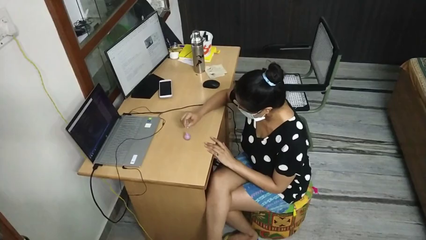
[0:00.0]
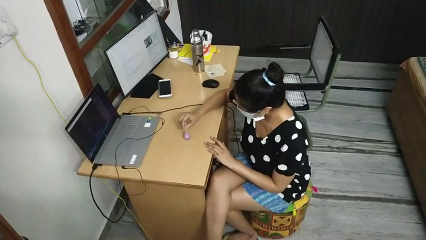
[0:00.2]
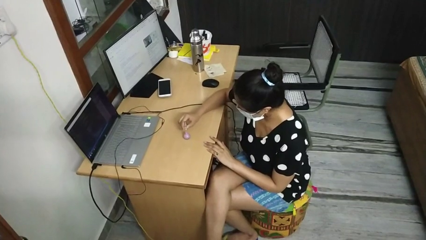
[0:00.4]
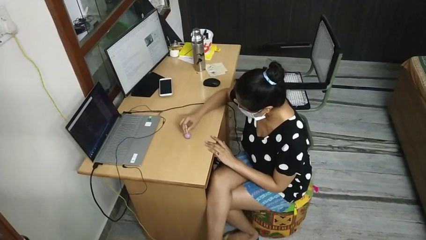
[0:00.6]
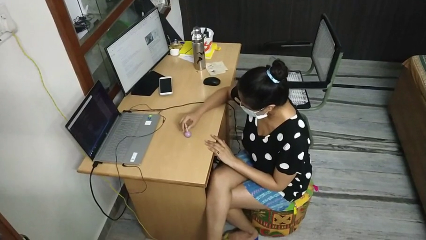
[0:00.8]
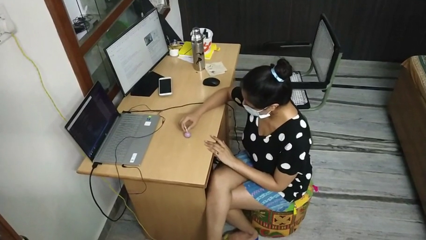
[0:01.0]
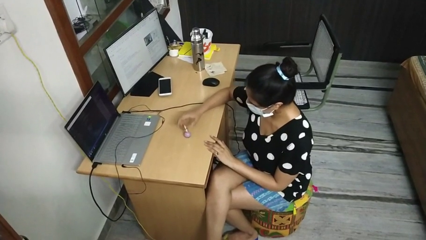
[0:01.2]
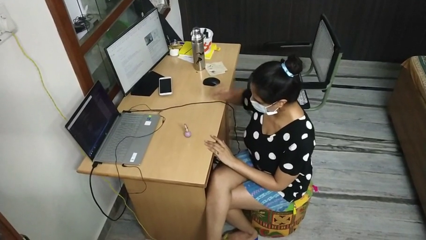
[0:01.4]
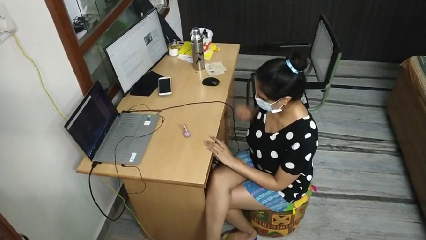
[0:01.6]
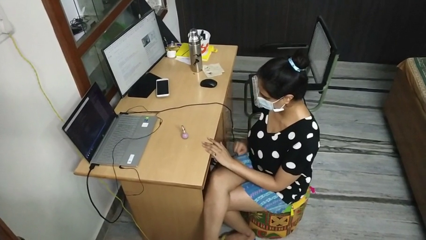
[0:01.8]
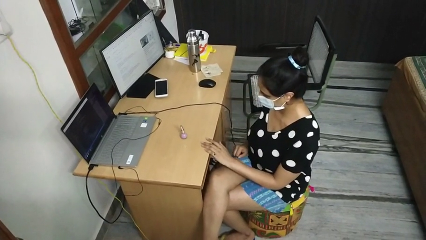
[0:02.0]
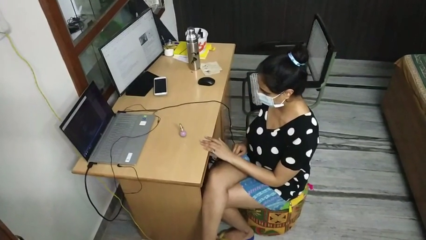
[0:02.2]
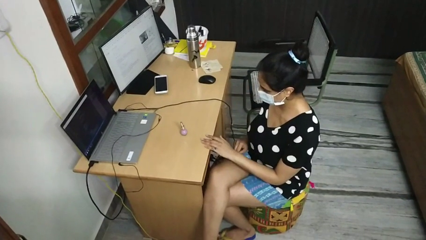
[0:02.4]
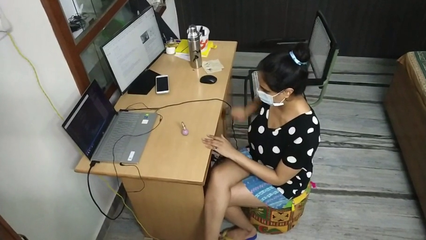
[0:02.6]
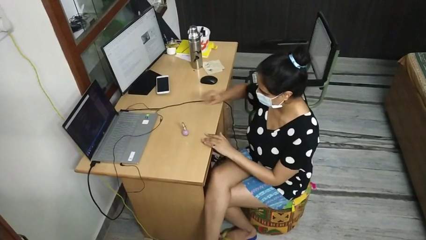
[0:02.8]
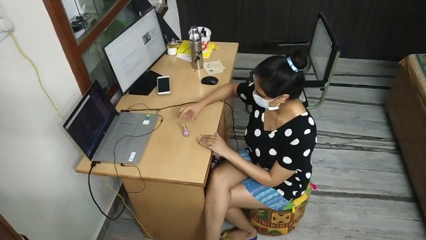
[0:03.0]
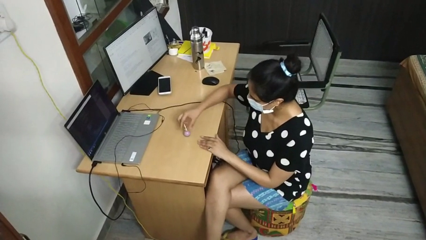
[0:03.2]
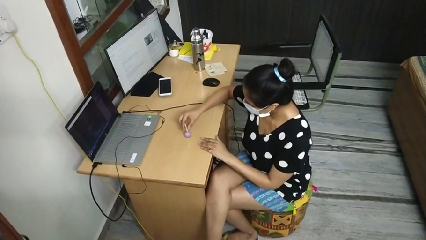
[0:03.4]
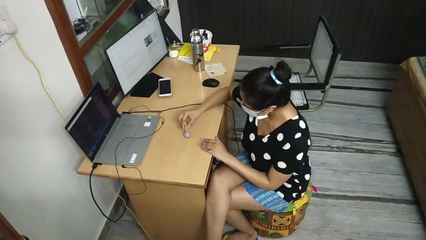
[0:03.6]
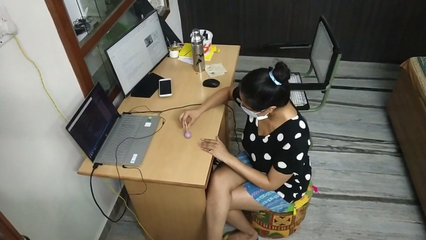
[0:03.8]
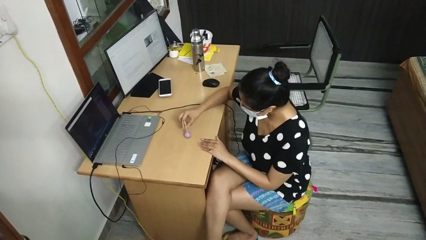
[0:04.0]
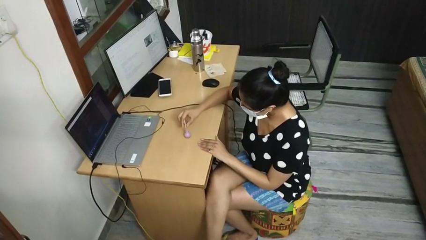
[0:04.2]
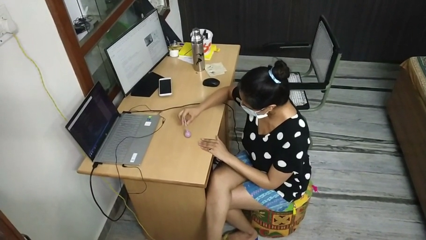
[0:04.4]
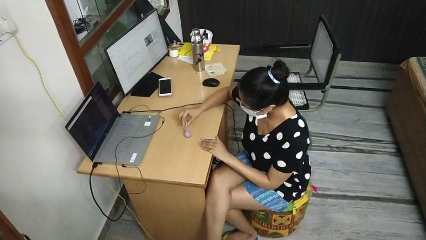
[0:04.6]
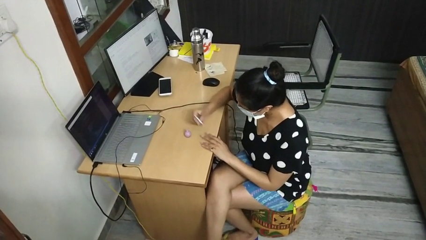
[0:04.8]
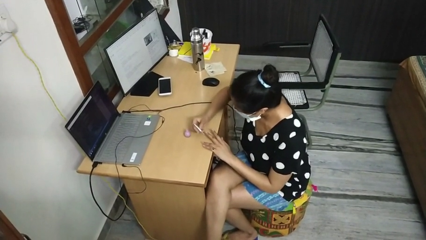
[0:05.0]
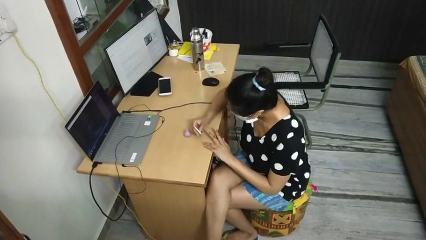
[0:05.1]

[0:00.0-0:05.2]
person paints fingernails

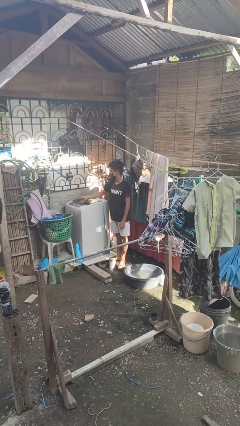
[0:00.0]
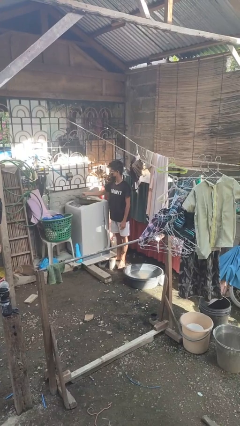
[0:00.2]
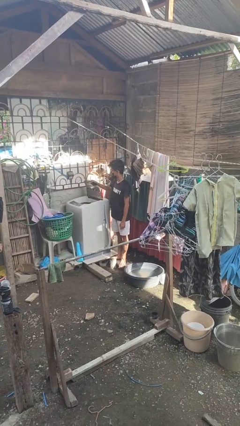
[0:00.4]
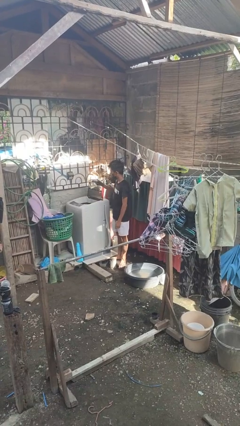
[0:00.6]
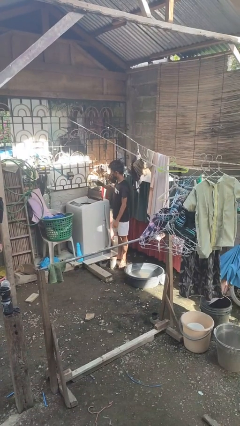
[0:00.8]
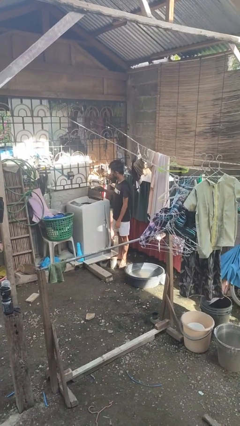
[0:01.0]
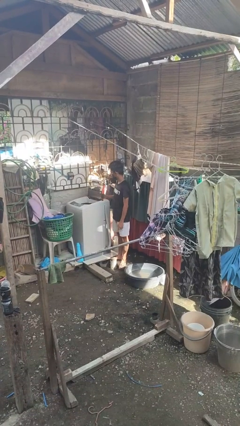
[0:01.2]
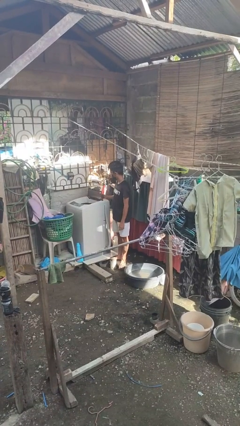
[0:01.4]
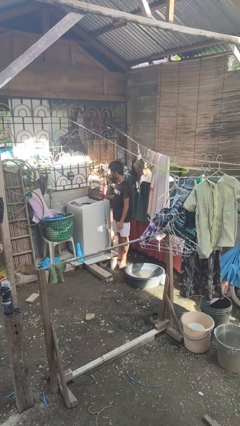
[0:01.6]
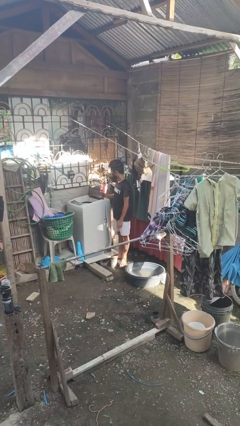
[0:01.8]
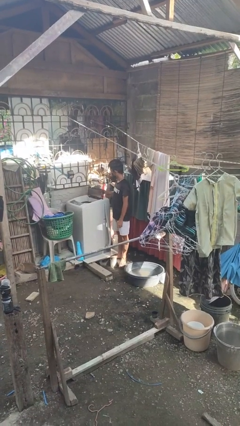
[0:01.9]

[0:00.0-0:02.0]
person opens clothes washer

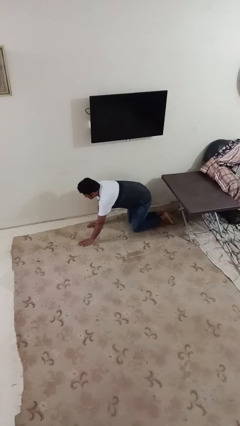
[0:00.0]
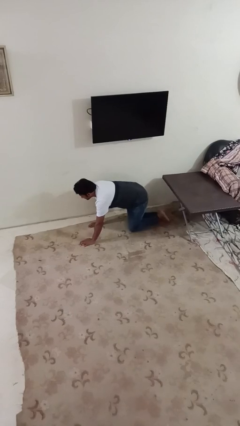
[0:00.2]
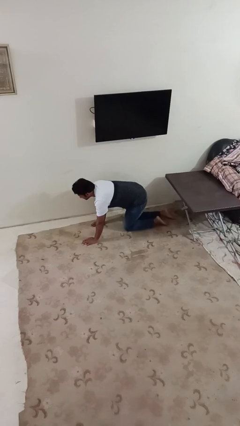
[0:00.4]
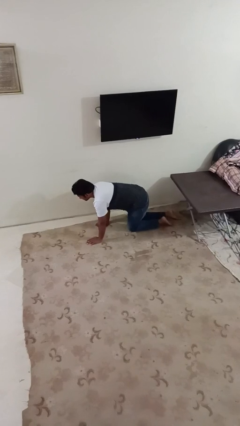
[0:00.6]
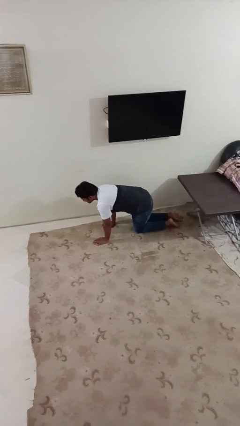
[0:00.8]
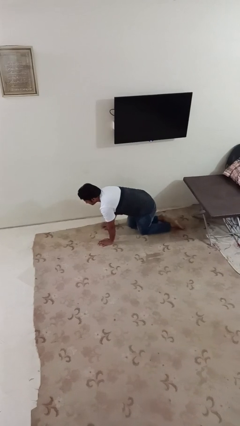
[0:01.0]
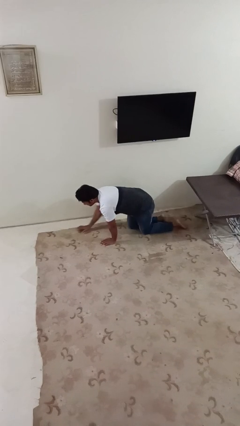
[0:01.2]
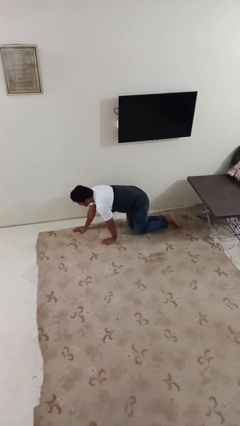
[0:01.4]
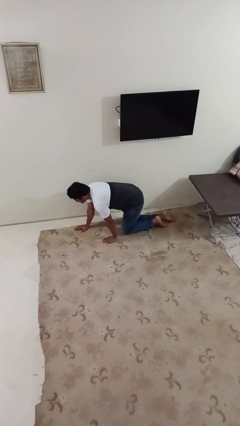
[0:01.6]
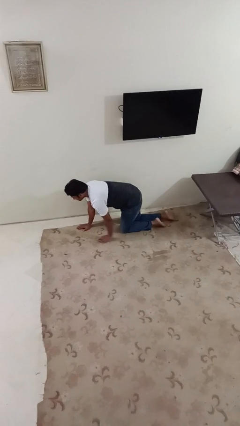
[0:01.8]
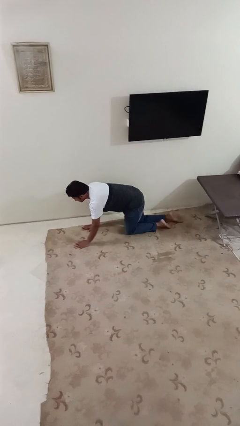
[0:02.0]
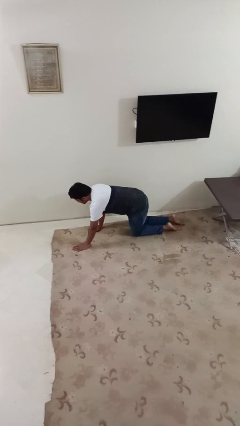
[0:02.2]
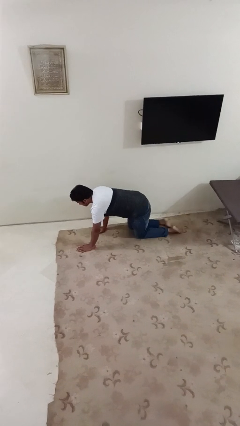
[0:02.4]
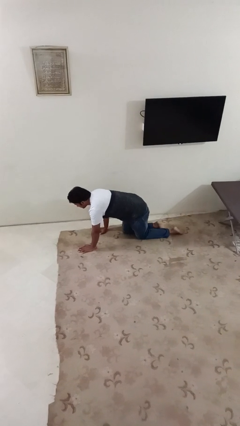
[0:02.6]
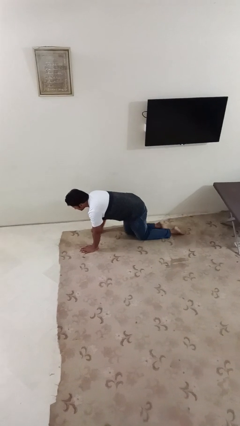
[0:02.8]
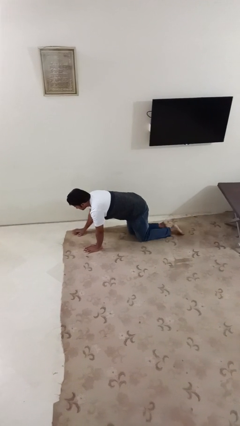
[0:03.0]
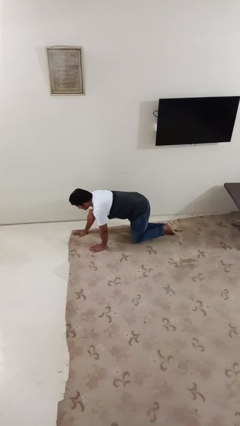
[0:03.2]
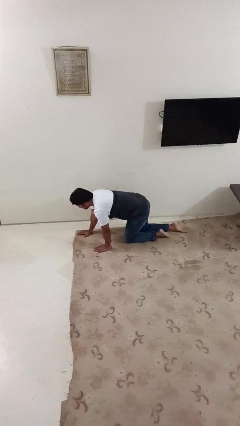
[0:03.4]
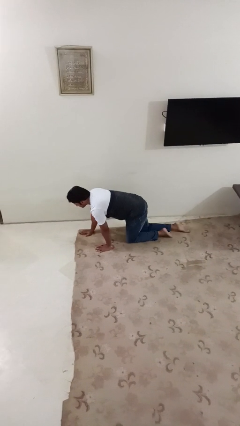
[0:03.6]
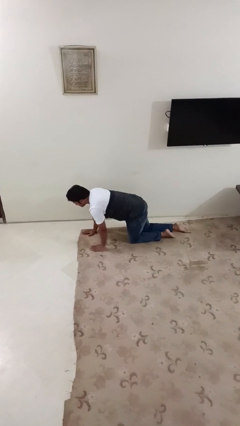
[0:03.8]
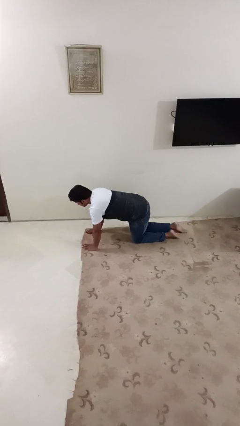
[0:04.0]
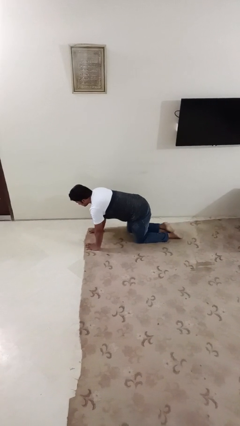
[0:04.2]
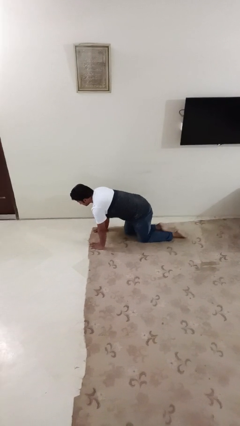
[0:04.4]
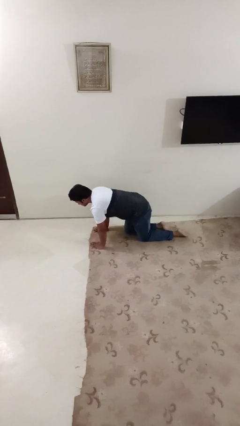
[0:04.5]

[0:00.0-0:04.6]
person crawls

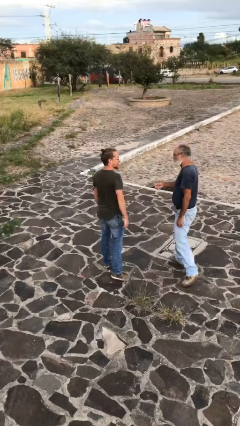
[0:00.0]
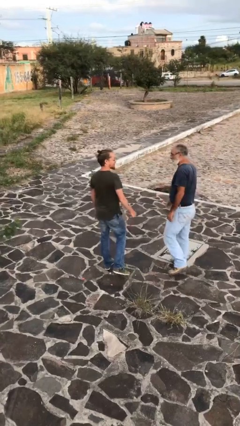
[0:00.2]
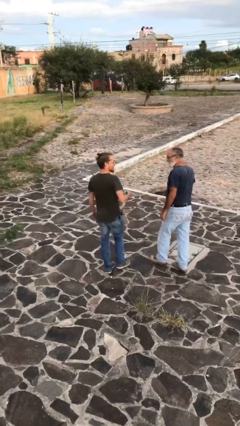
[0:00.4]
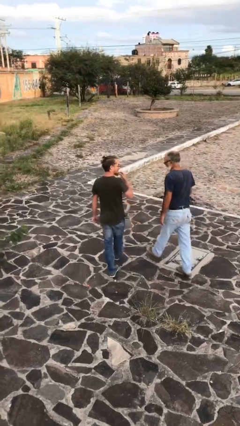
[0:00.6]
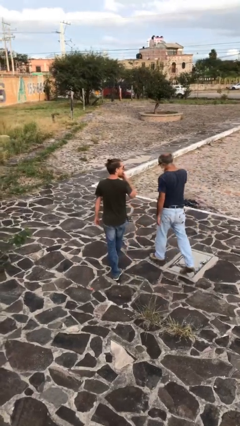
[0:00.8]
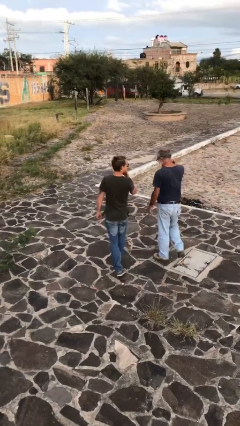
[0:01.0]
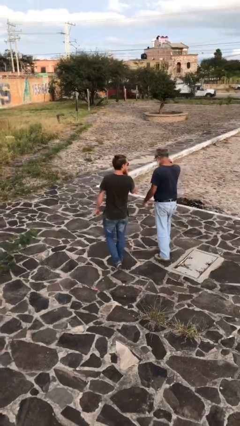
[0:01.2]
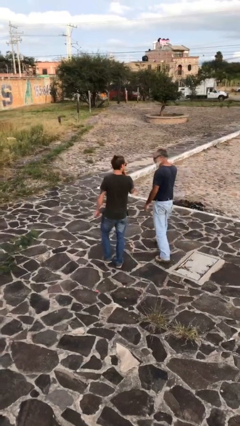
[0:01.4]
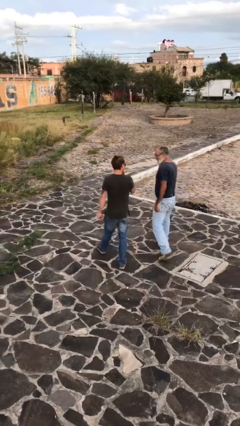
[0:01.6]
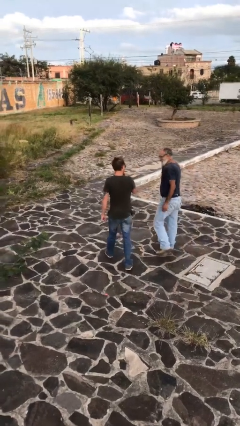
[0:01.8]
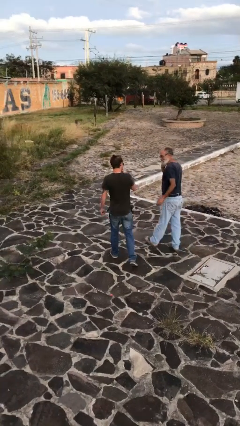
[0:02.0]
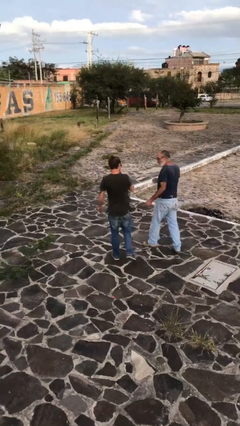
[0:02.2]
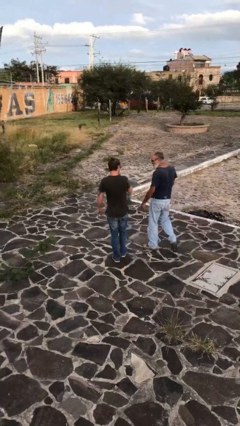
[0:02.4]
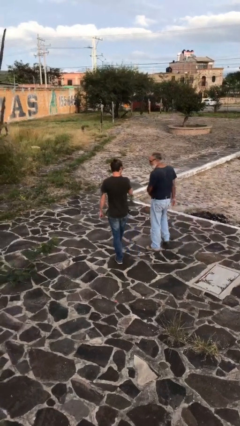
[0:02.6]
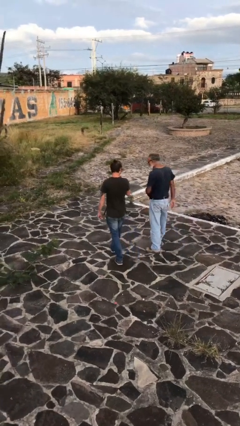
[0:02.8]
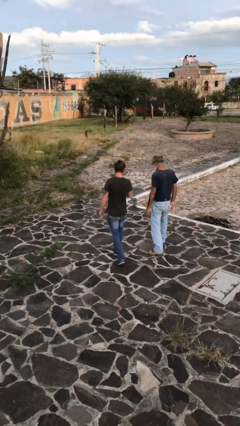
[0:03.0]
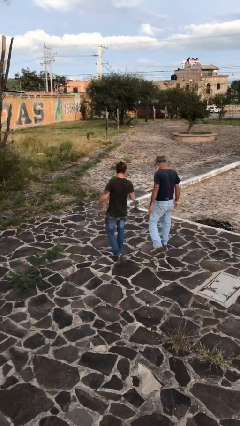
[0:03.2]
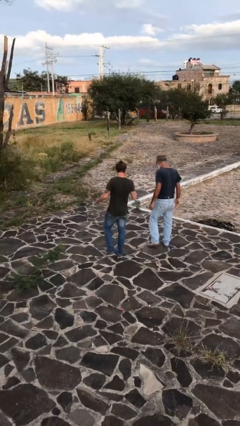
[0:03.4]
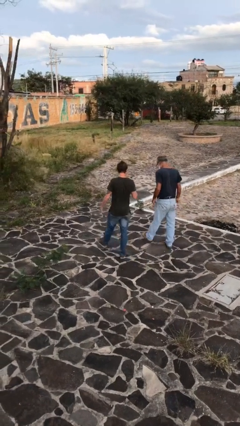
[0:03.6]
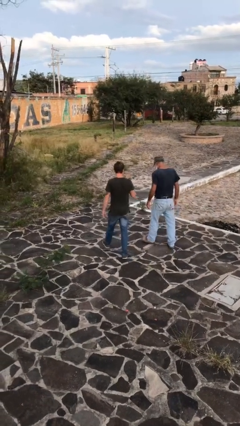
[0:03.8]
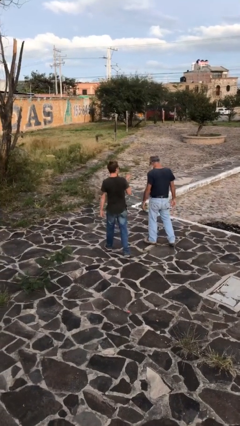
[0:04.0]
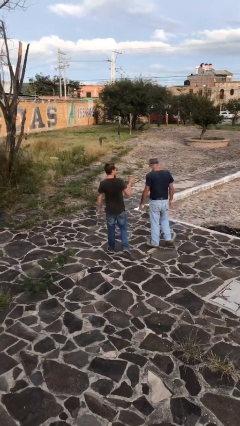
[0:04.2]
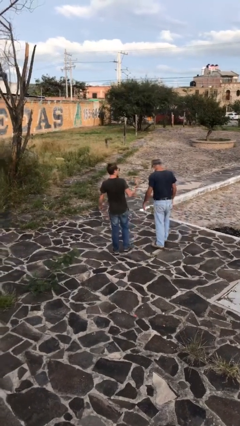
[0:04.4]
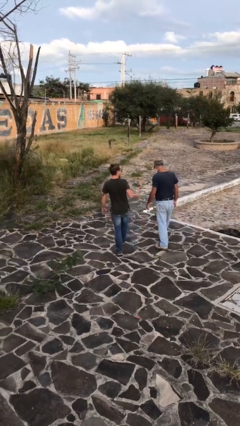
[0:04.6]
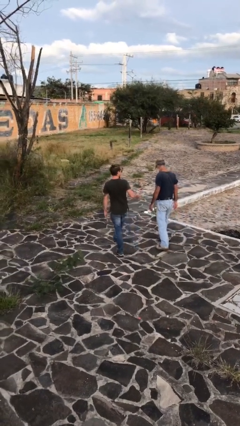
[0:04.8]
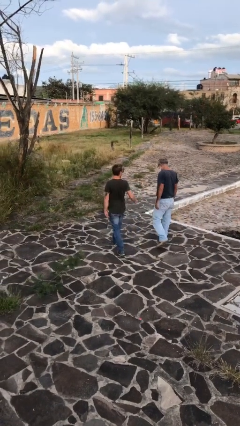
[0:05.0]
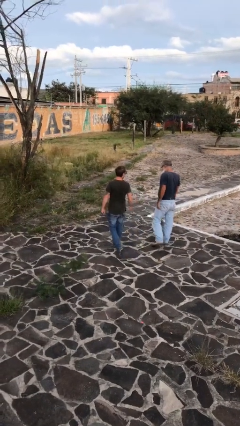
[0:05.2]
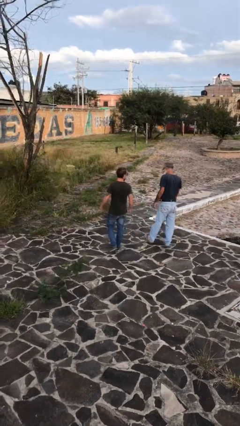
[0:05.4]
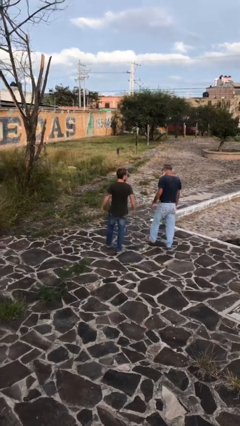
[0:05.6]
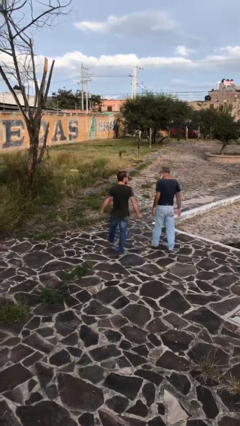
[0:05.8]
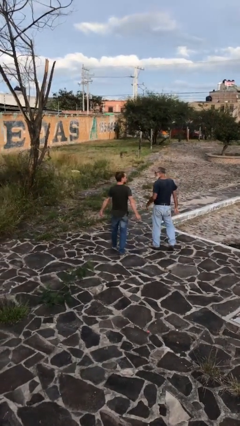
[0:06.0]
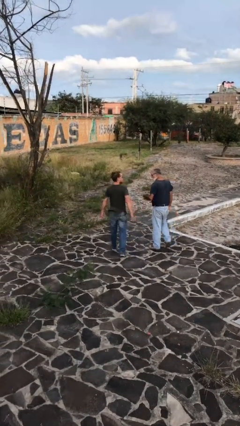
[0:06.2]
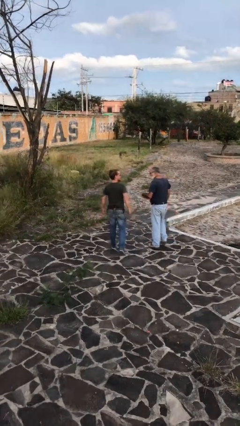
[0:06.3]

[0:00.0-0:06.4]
person talks to person
